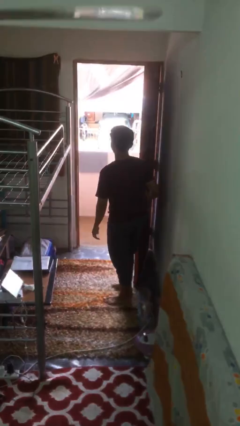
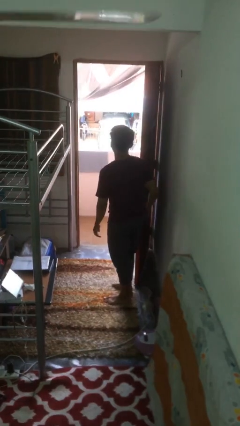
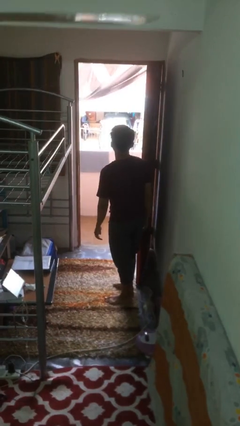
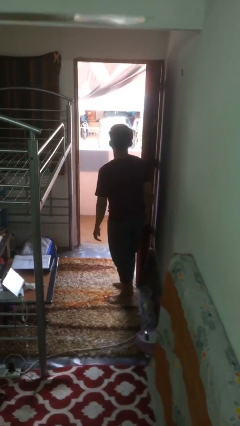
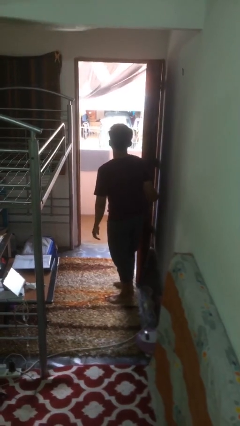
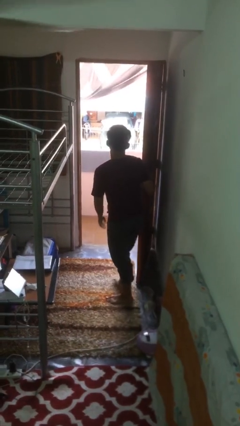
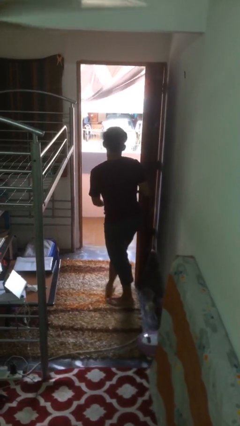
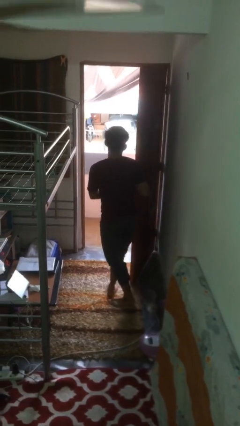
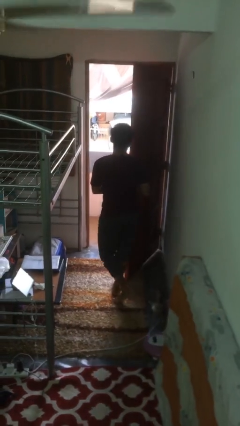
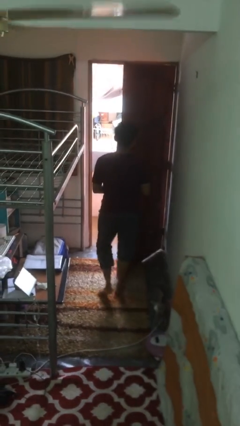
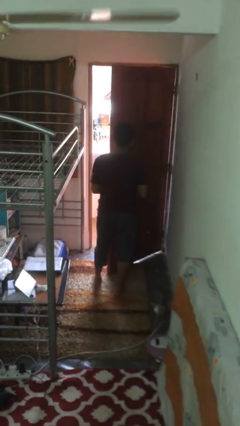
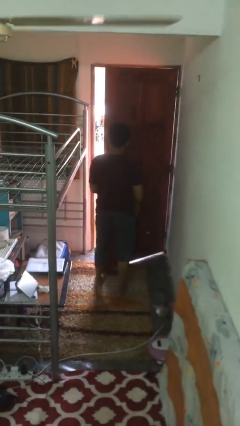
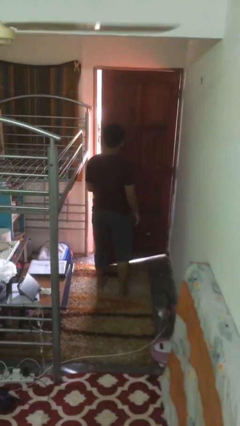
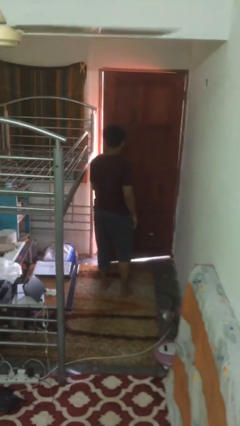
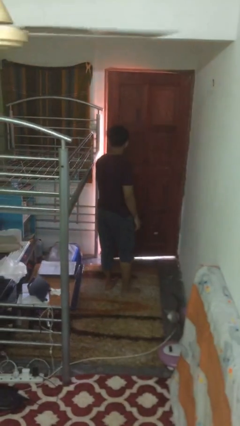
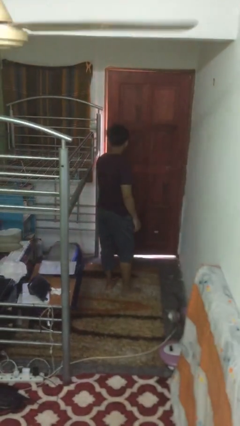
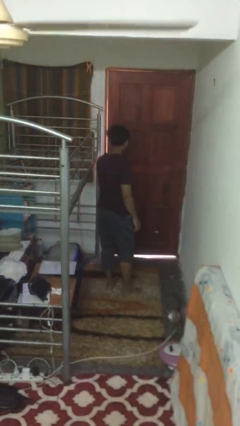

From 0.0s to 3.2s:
person closes facility door

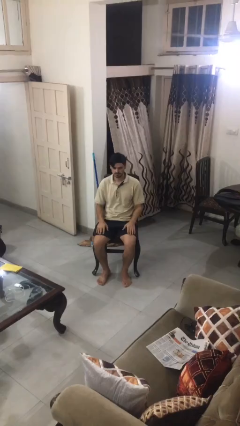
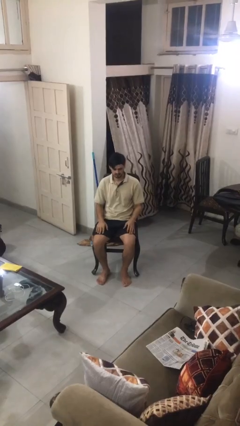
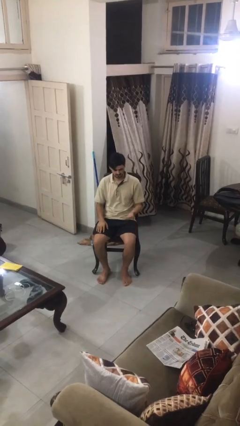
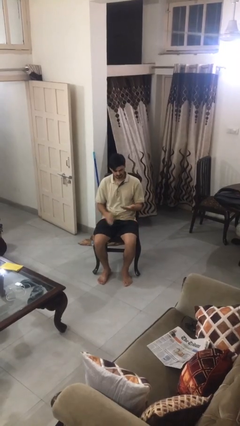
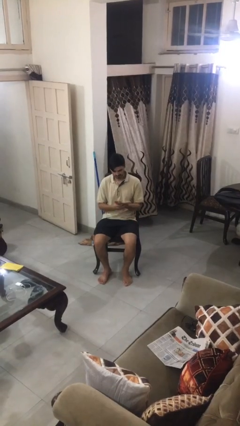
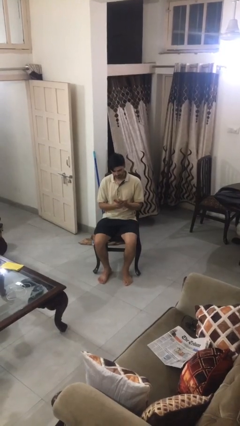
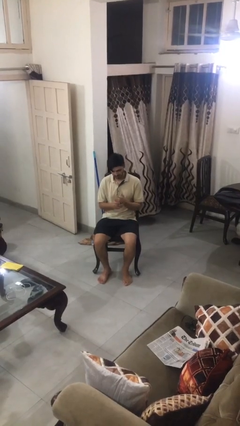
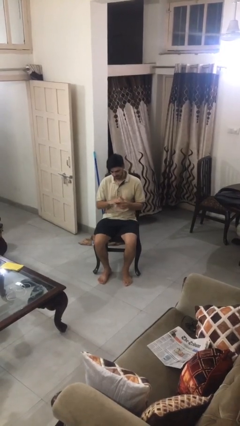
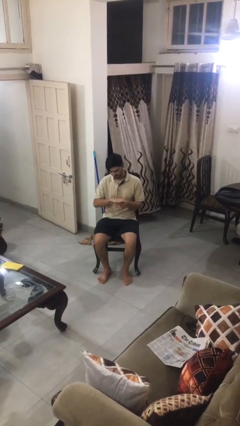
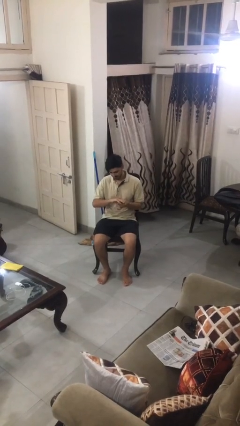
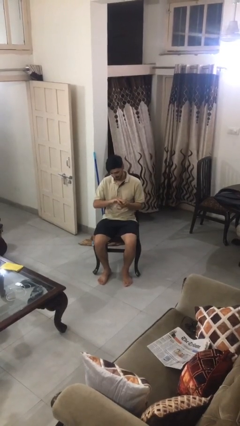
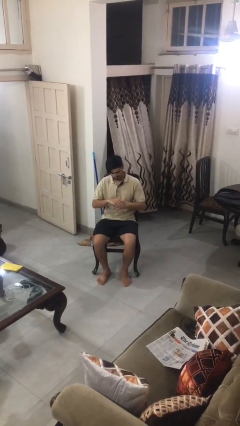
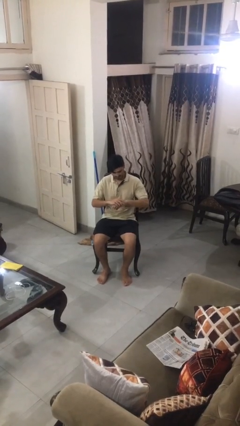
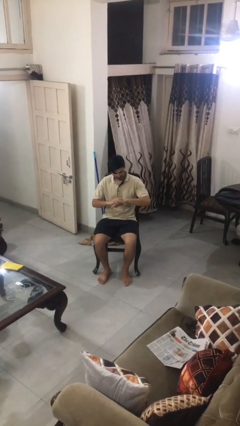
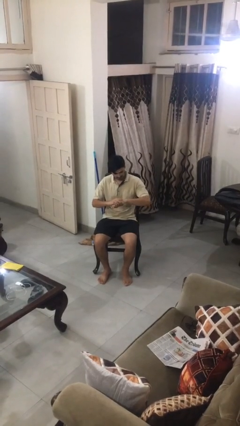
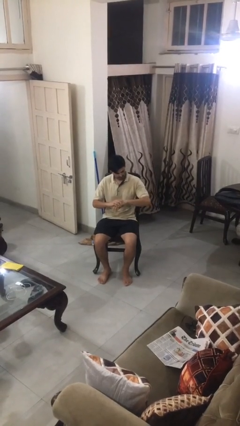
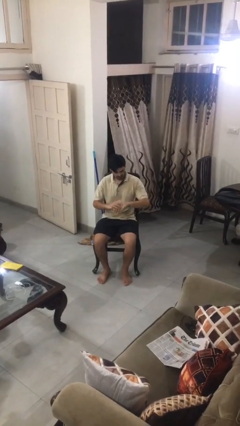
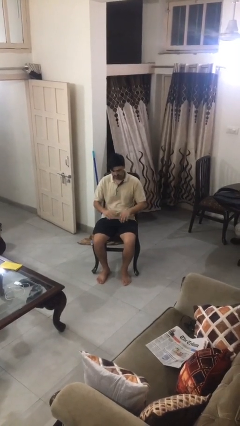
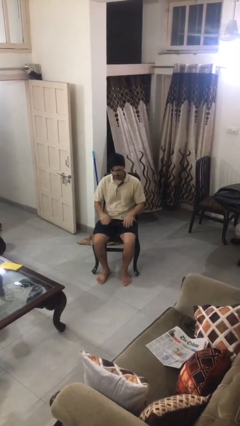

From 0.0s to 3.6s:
person looks at hands in lap

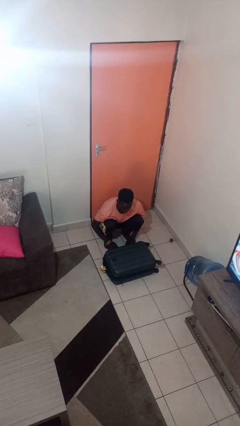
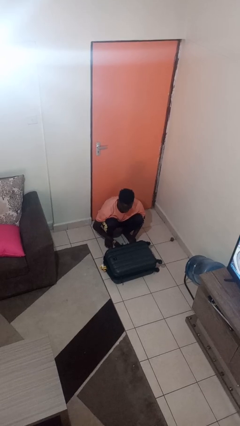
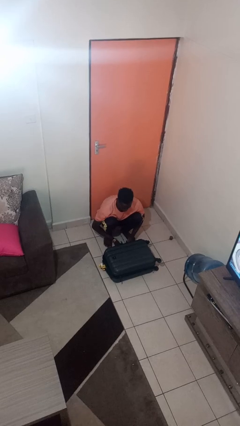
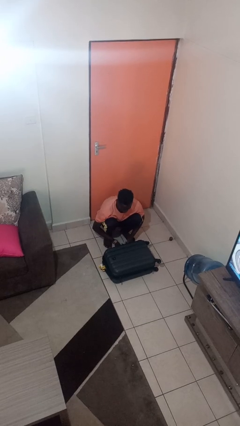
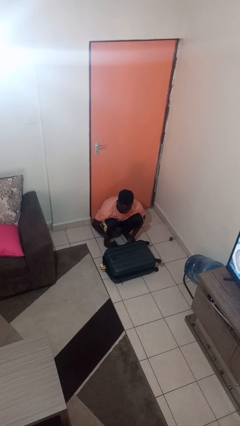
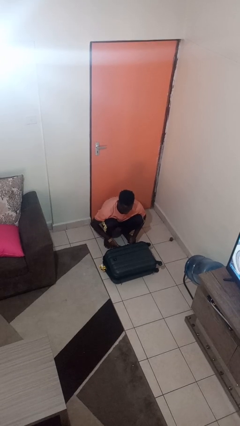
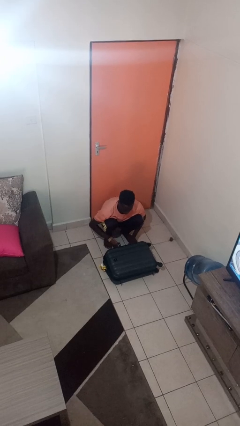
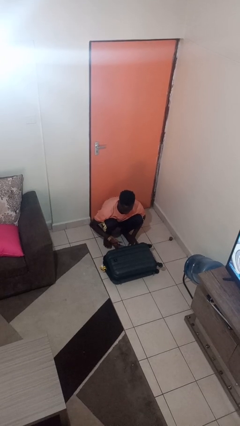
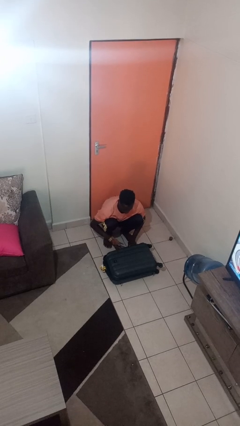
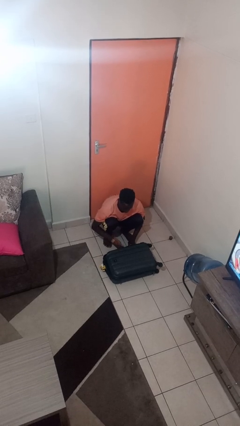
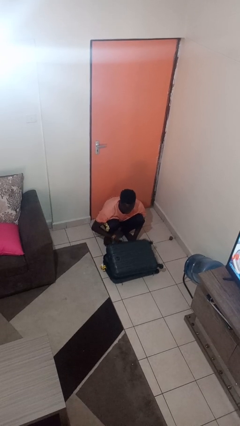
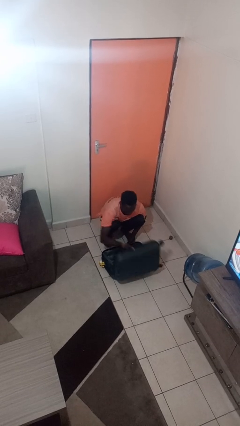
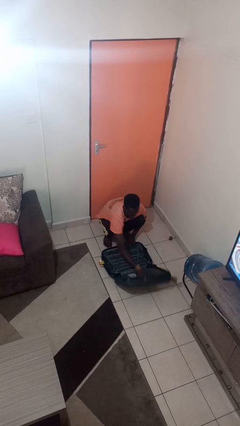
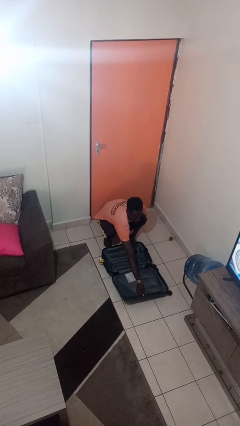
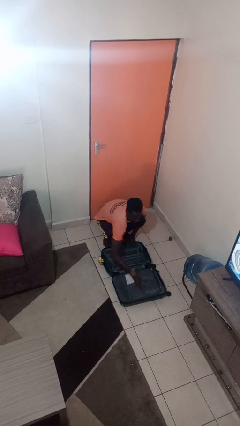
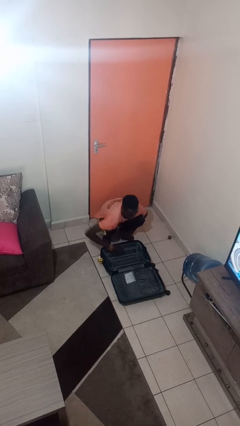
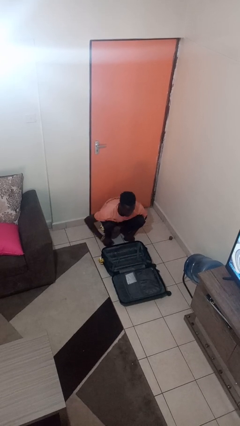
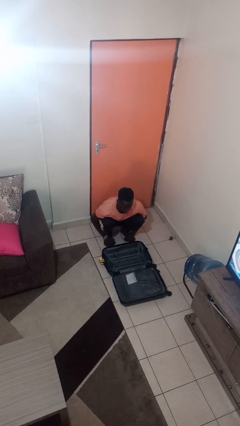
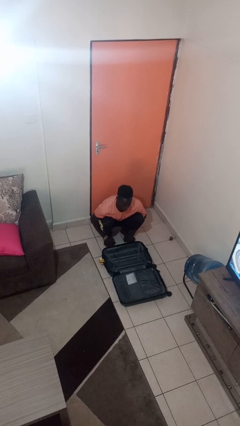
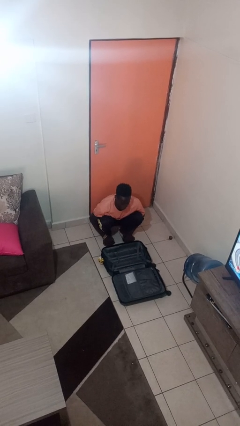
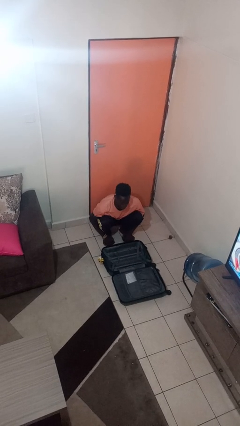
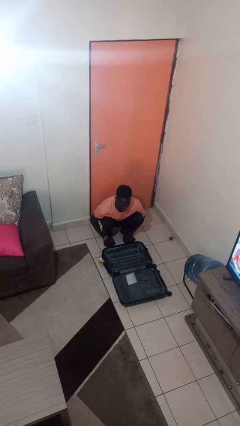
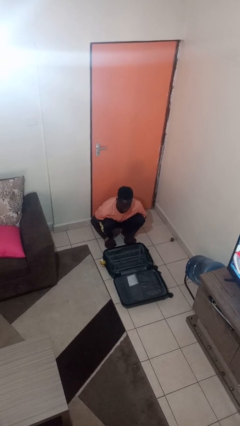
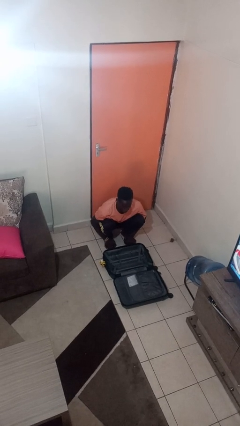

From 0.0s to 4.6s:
person opens suitcase

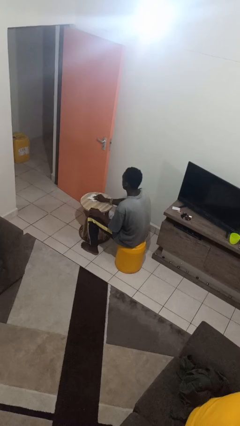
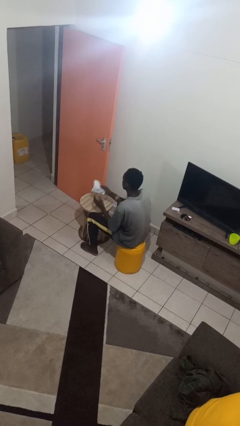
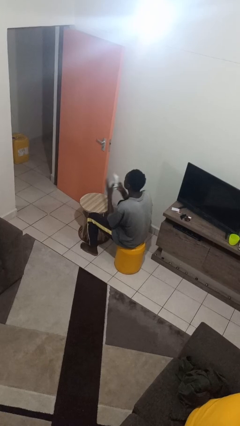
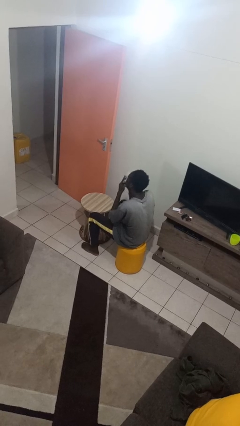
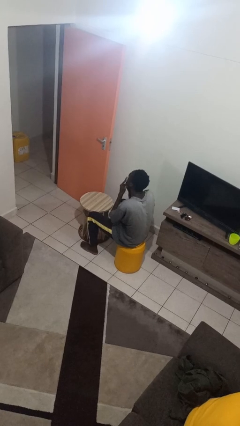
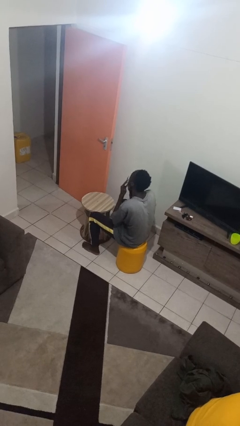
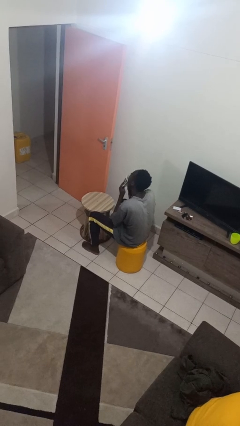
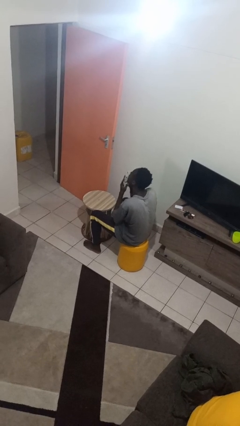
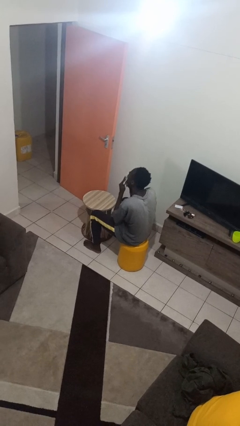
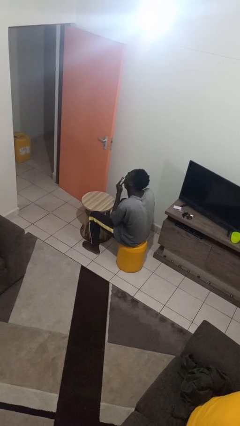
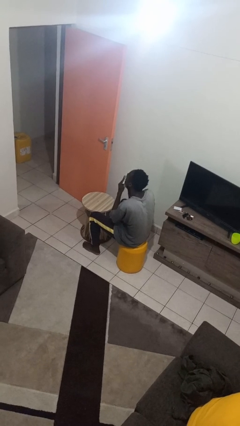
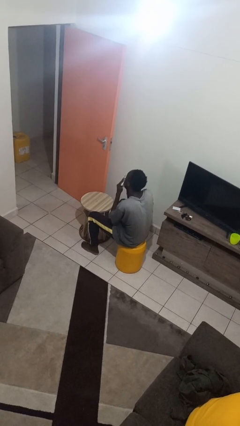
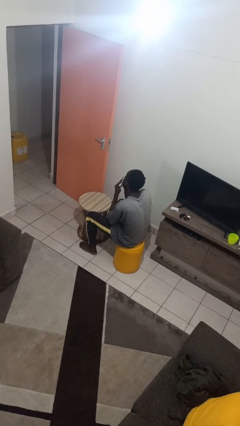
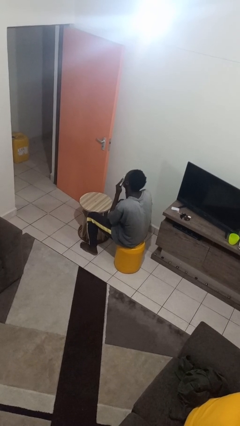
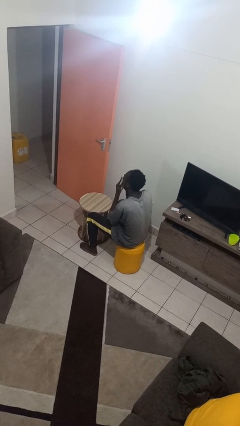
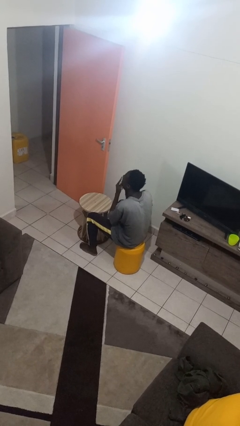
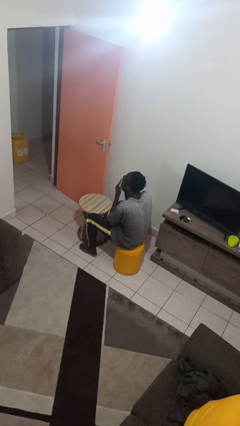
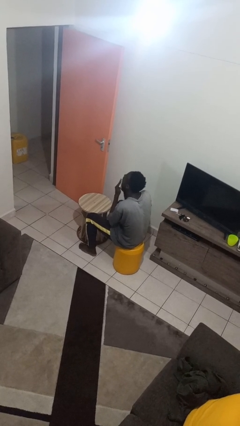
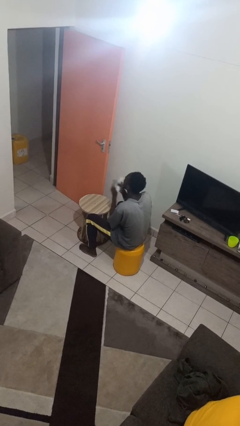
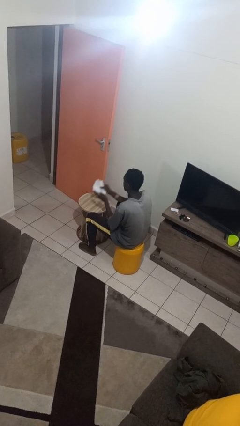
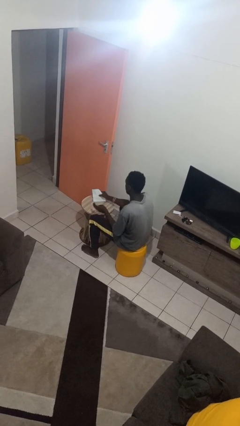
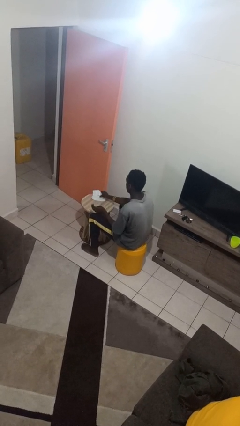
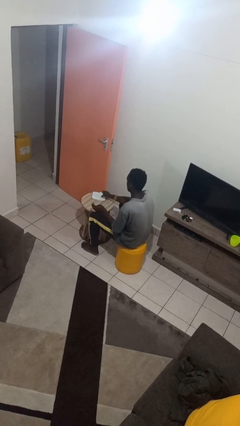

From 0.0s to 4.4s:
person wipes mouth with napkin

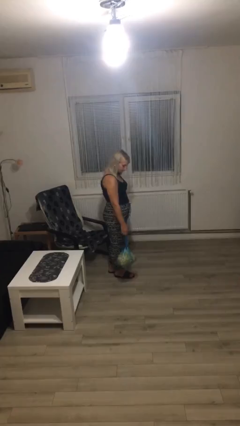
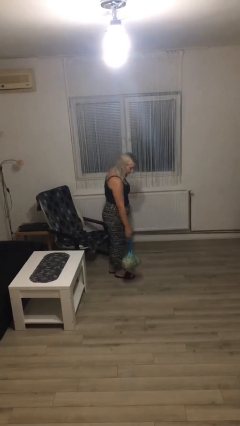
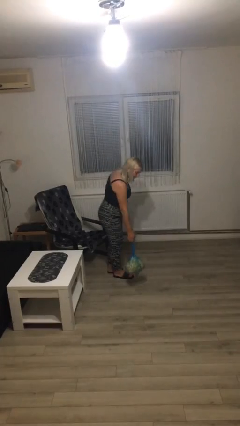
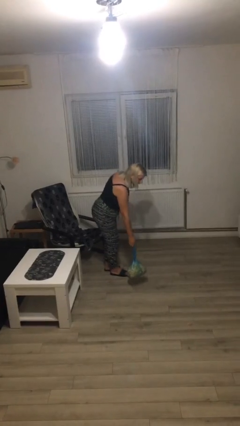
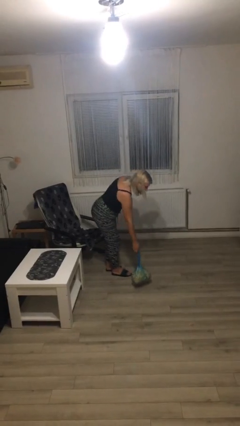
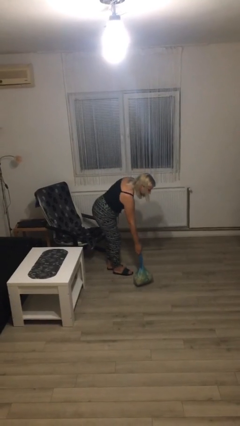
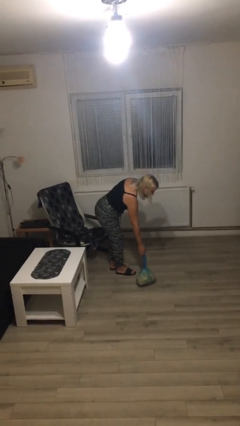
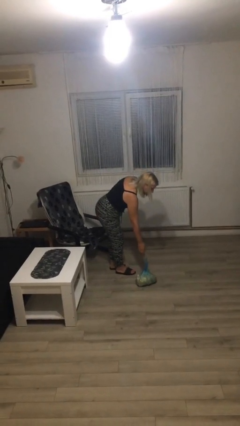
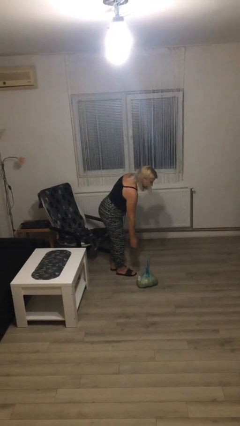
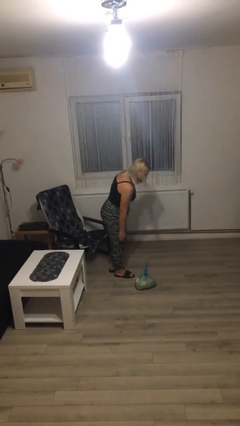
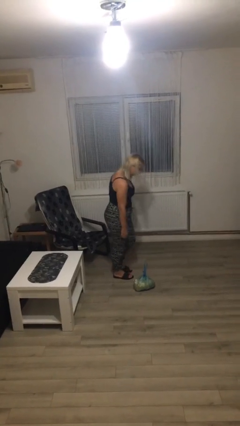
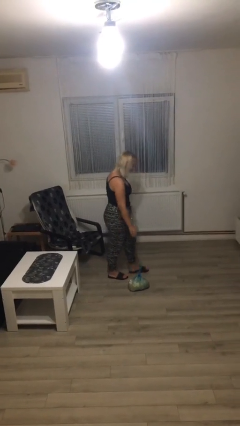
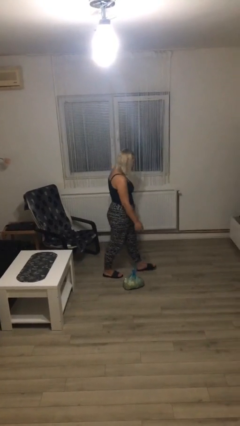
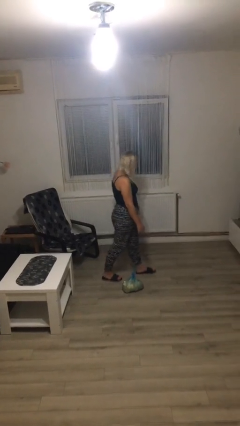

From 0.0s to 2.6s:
person puts down object on floor
